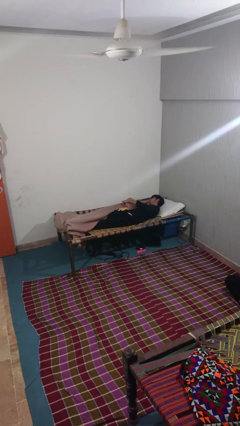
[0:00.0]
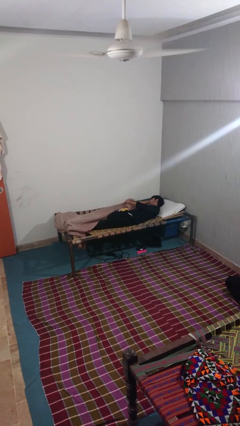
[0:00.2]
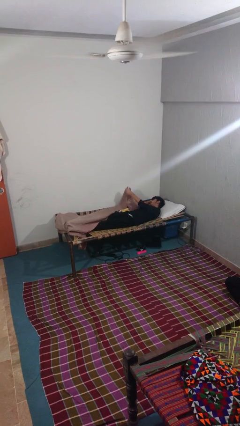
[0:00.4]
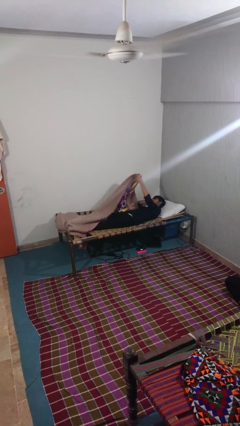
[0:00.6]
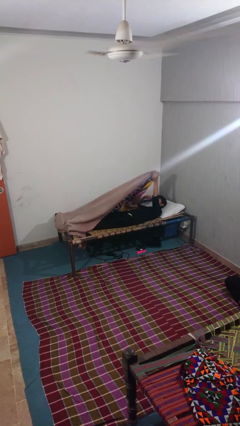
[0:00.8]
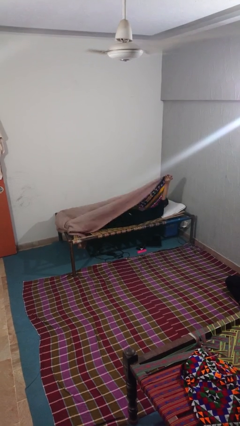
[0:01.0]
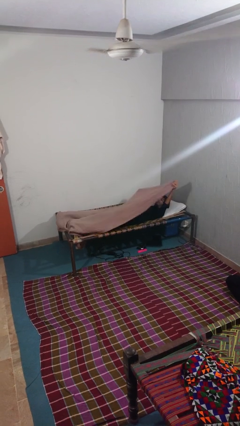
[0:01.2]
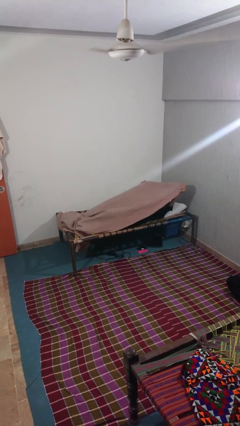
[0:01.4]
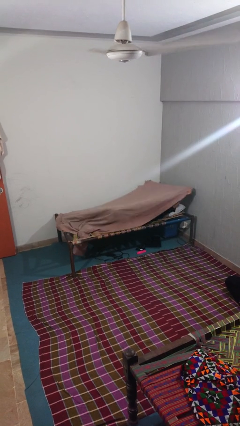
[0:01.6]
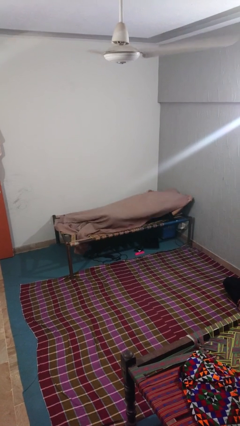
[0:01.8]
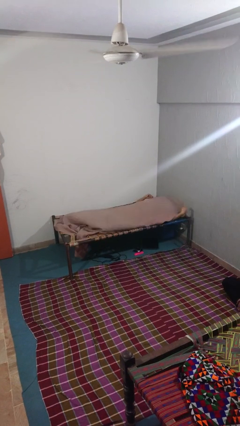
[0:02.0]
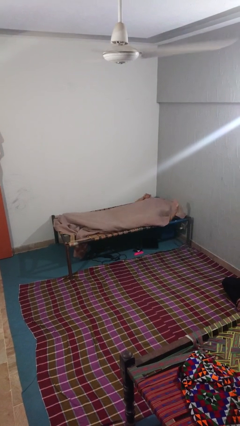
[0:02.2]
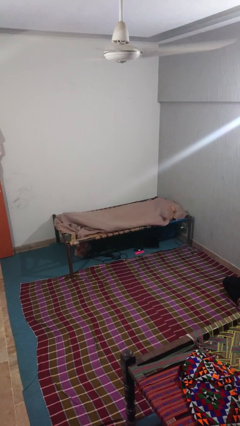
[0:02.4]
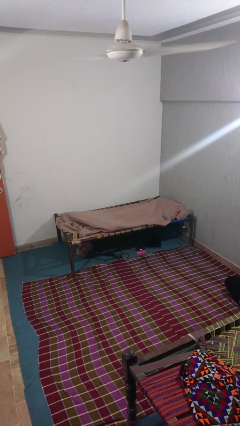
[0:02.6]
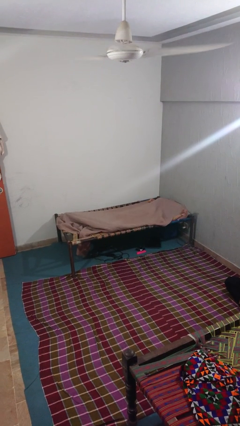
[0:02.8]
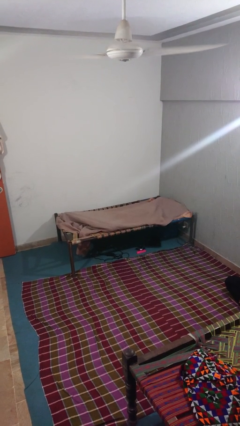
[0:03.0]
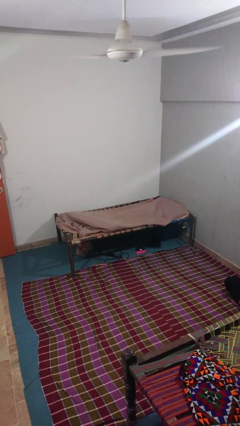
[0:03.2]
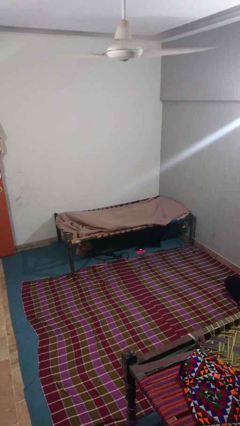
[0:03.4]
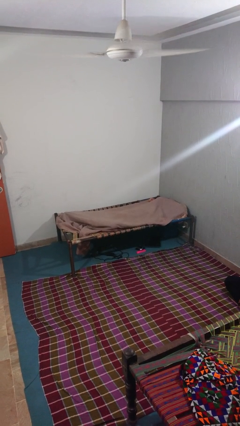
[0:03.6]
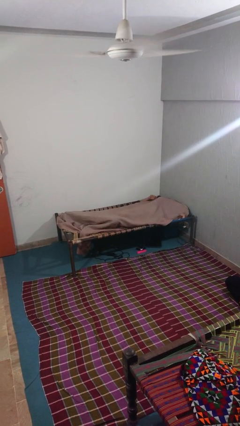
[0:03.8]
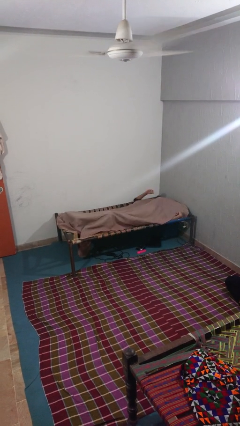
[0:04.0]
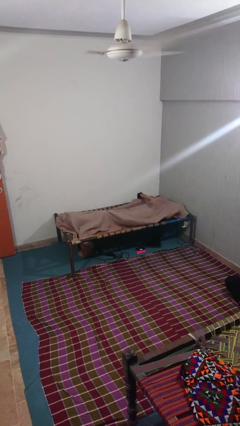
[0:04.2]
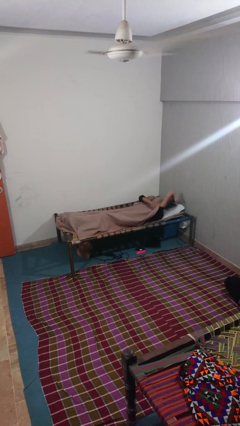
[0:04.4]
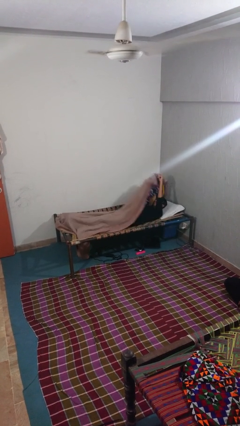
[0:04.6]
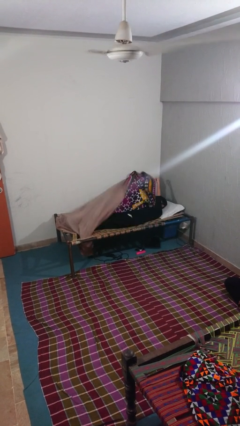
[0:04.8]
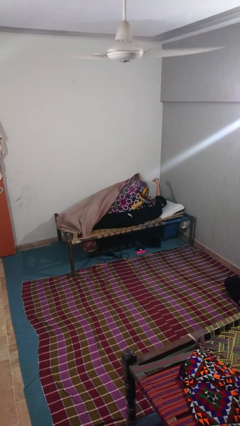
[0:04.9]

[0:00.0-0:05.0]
person covers with blanket

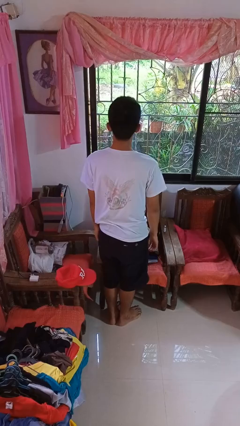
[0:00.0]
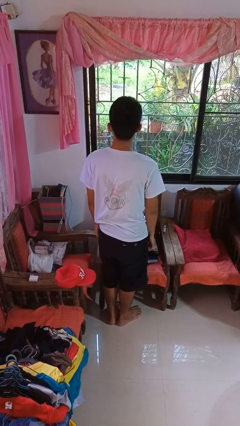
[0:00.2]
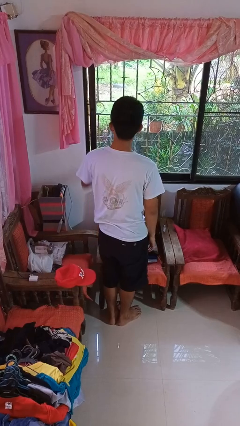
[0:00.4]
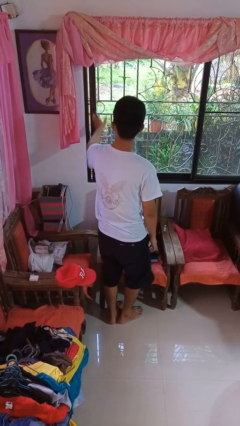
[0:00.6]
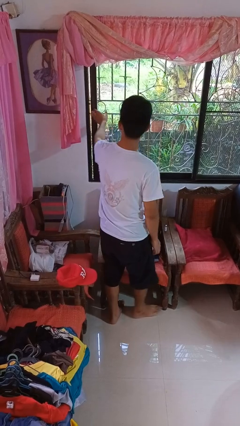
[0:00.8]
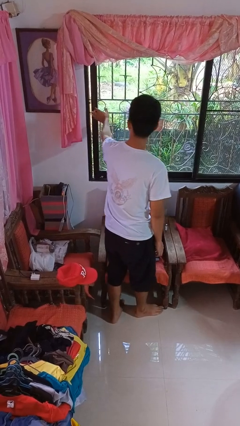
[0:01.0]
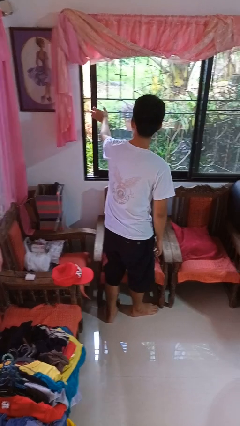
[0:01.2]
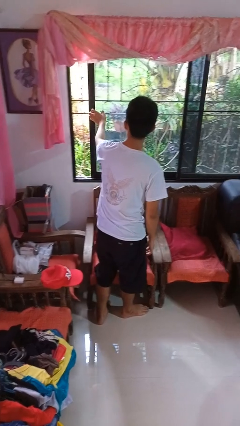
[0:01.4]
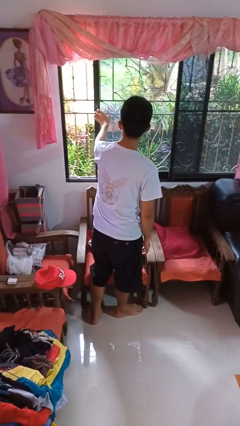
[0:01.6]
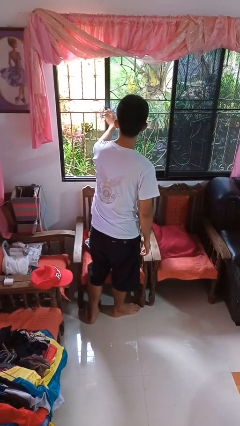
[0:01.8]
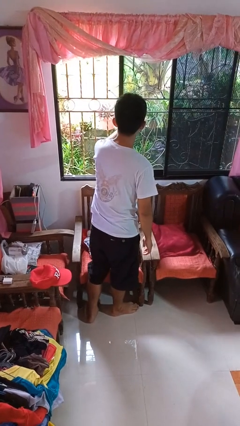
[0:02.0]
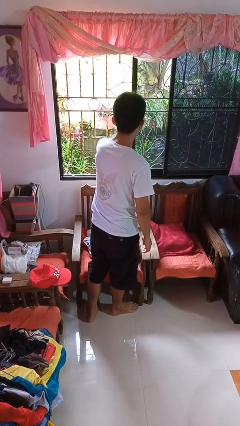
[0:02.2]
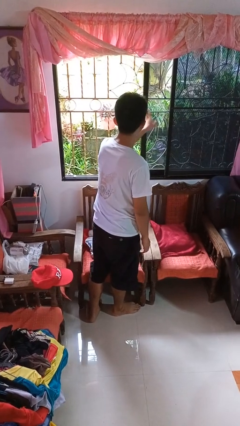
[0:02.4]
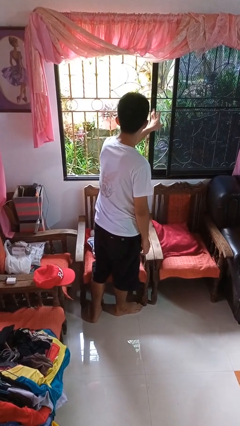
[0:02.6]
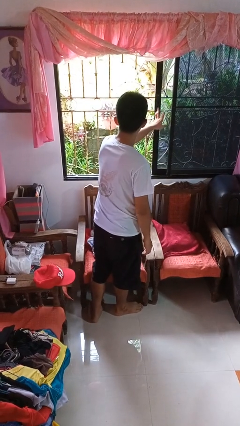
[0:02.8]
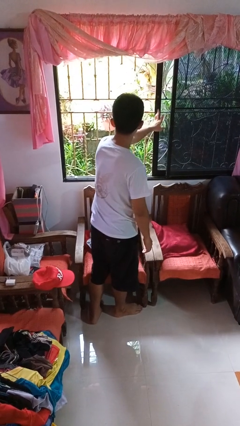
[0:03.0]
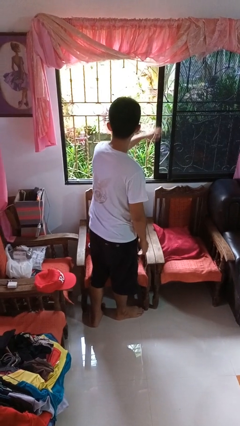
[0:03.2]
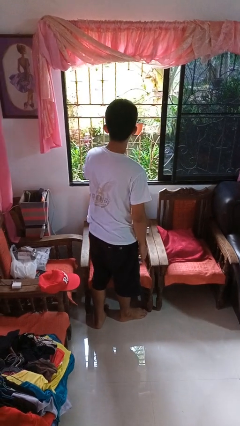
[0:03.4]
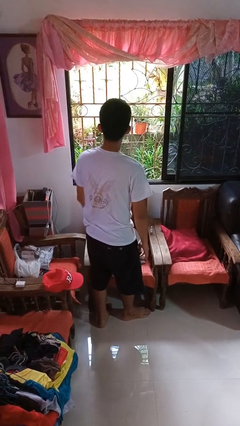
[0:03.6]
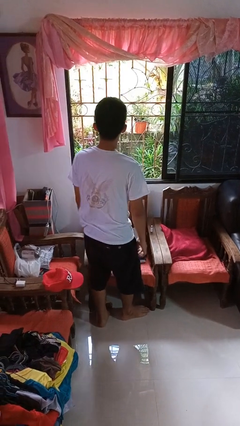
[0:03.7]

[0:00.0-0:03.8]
person opens home window

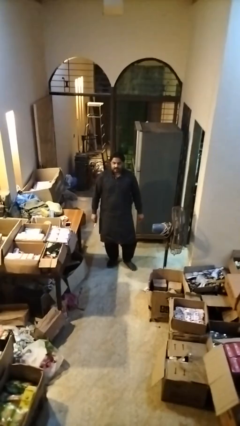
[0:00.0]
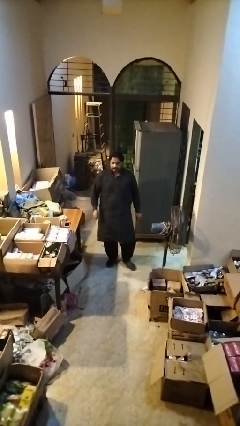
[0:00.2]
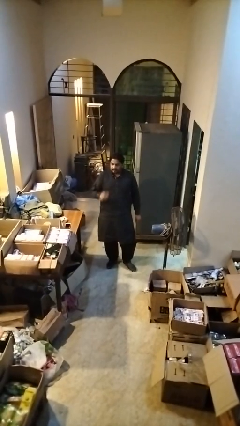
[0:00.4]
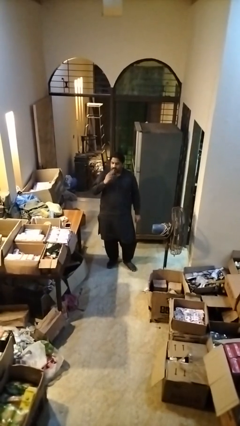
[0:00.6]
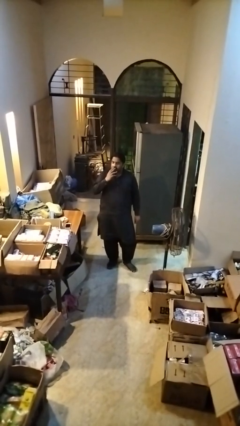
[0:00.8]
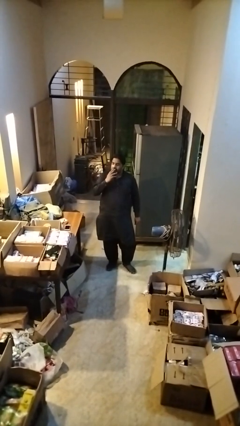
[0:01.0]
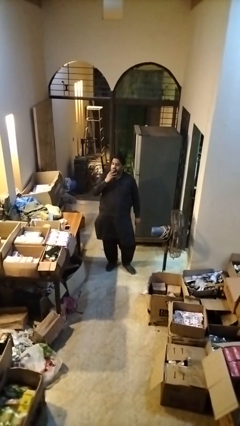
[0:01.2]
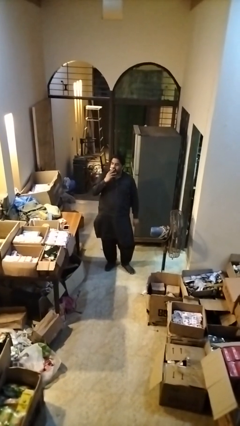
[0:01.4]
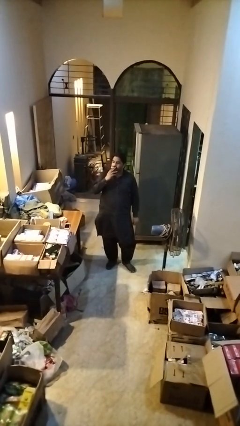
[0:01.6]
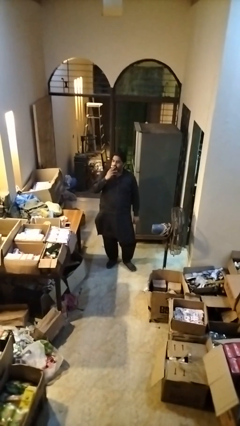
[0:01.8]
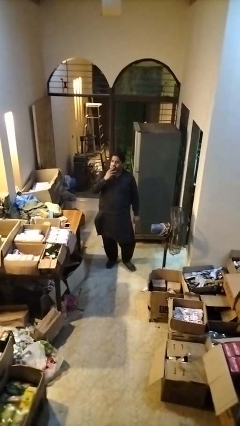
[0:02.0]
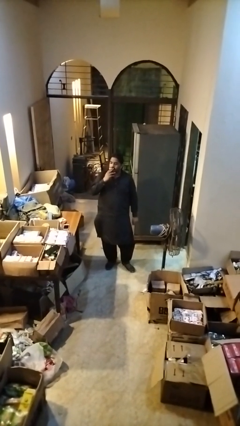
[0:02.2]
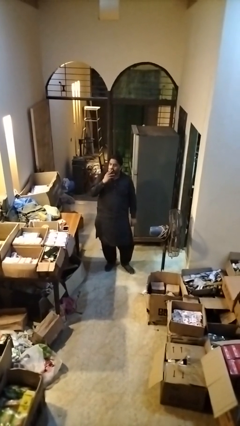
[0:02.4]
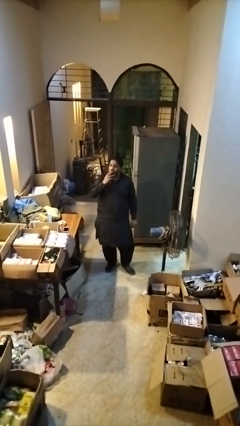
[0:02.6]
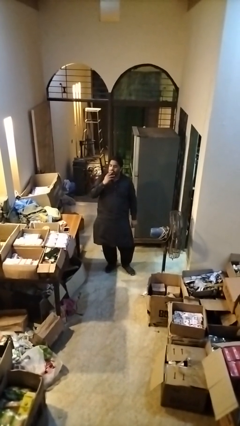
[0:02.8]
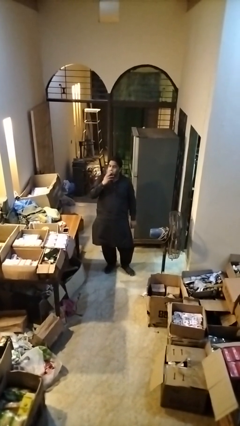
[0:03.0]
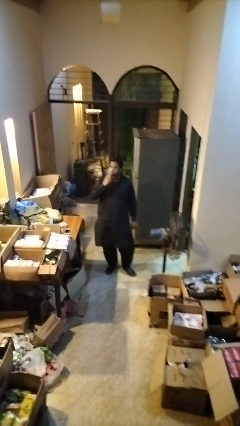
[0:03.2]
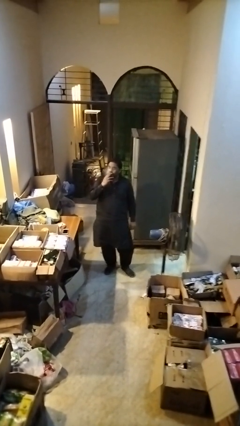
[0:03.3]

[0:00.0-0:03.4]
person vapes

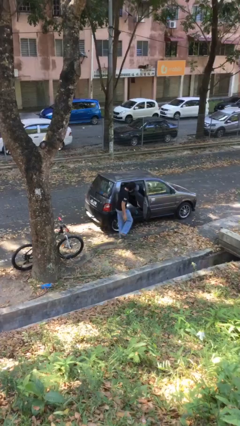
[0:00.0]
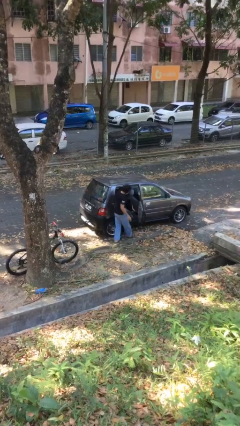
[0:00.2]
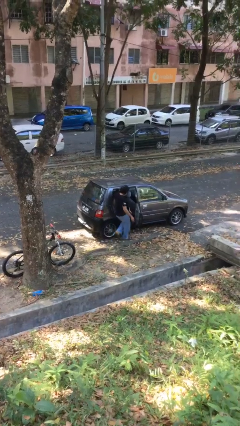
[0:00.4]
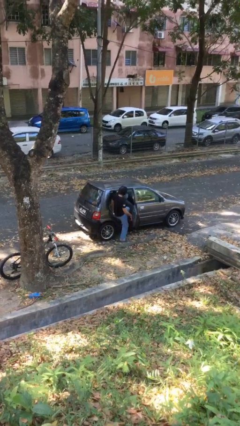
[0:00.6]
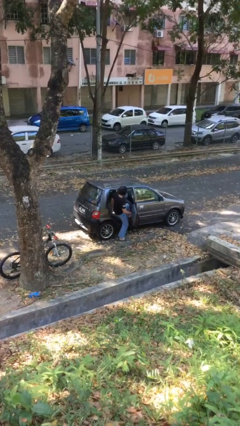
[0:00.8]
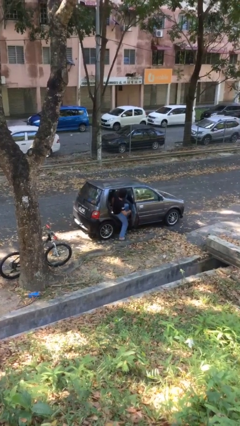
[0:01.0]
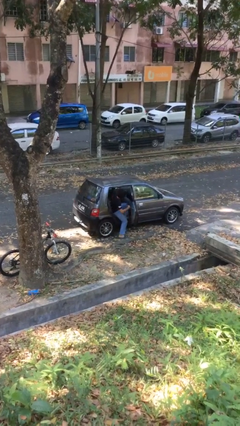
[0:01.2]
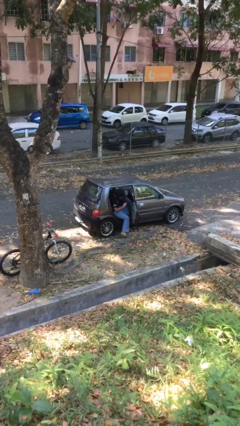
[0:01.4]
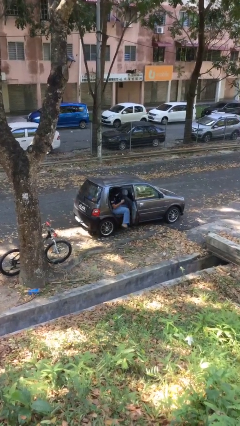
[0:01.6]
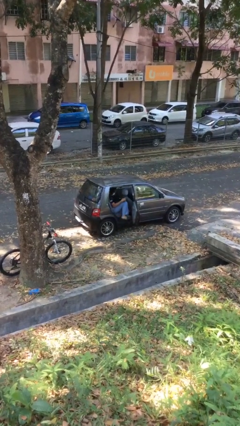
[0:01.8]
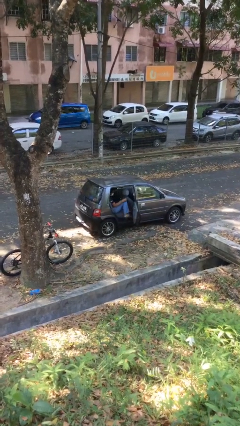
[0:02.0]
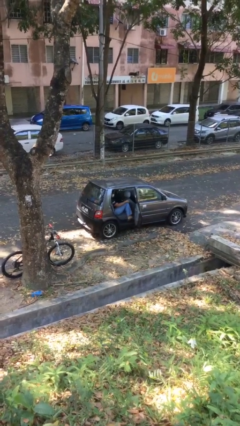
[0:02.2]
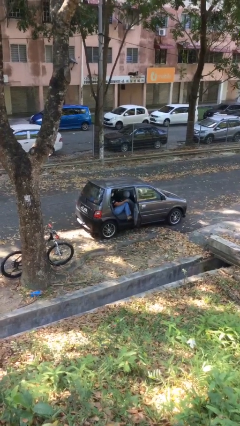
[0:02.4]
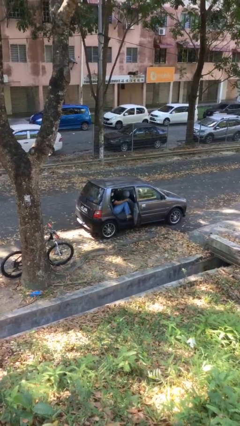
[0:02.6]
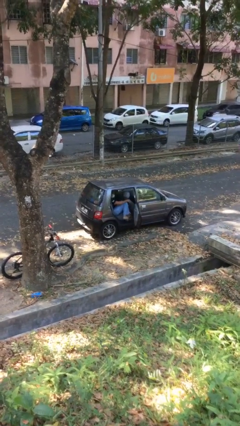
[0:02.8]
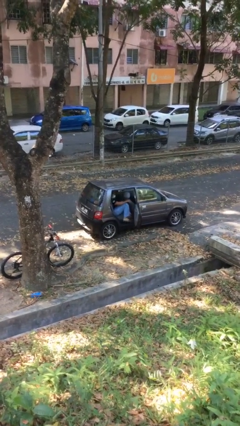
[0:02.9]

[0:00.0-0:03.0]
person enters car

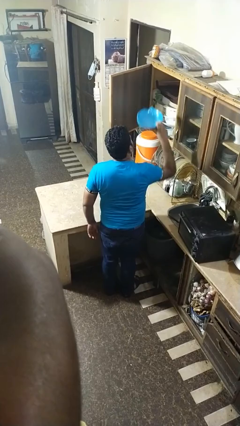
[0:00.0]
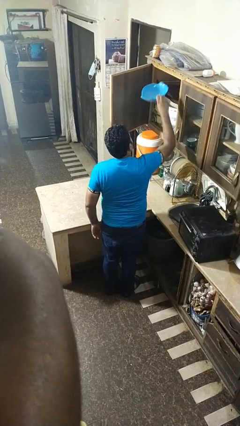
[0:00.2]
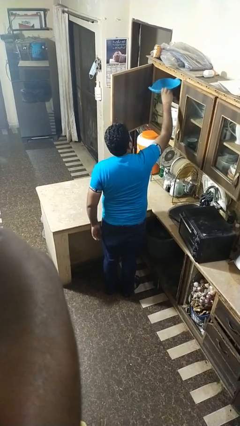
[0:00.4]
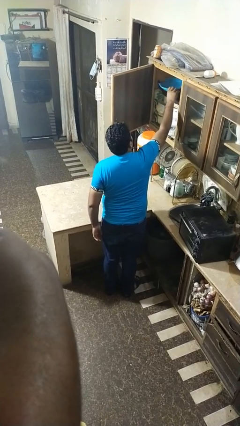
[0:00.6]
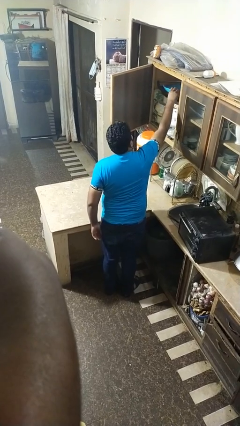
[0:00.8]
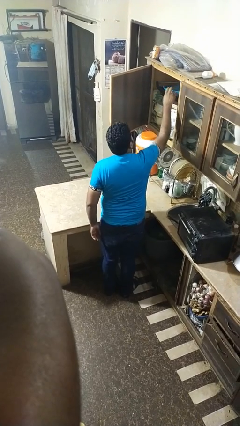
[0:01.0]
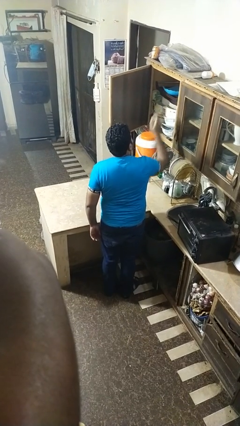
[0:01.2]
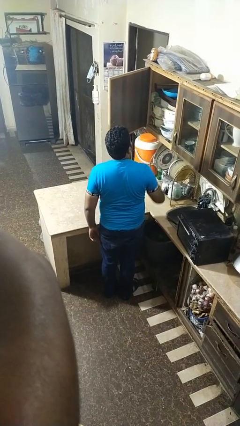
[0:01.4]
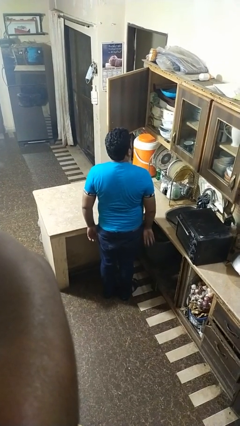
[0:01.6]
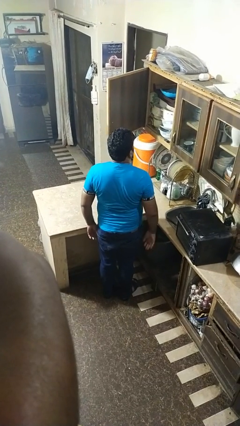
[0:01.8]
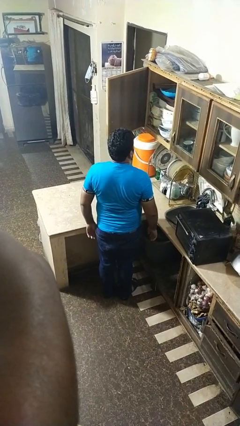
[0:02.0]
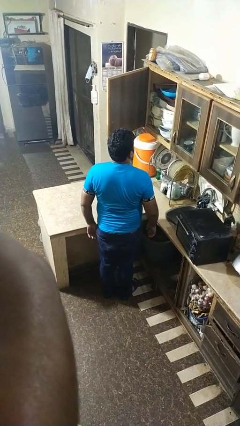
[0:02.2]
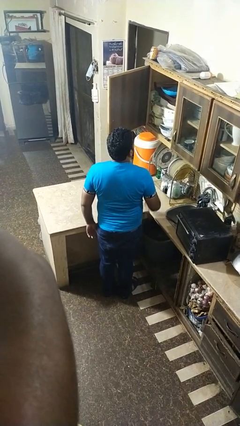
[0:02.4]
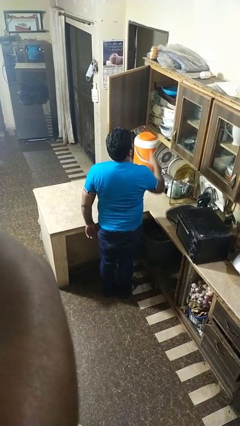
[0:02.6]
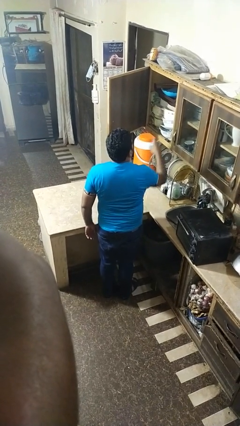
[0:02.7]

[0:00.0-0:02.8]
person takes object from cabinet
